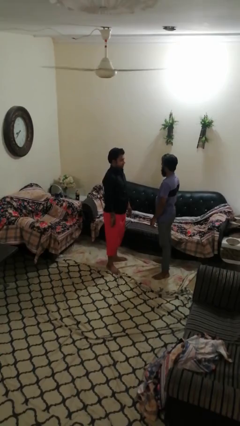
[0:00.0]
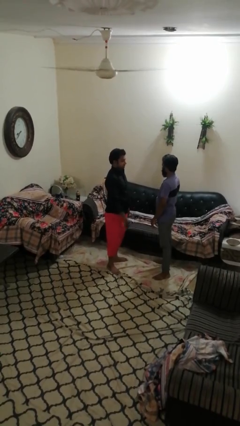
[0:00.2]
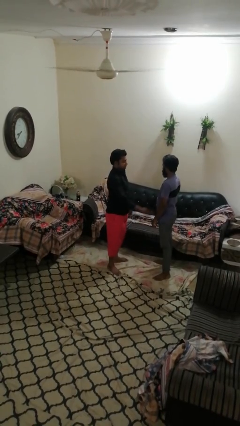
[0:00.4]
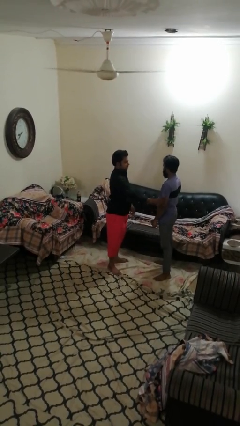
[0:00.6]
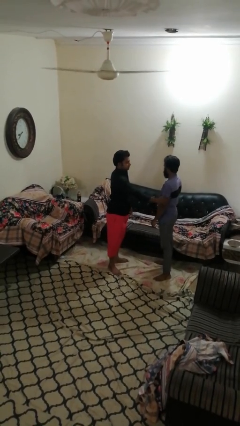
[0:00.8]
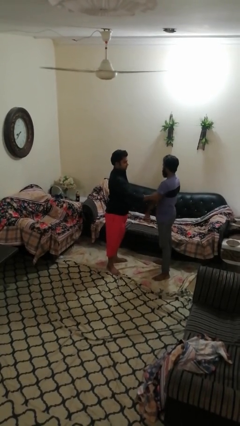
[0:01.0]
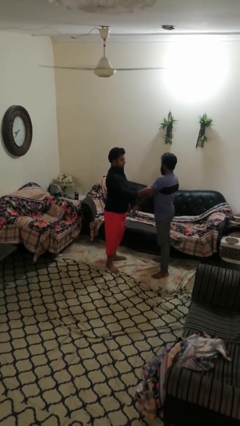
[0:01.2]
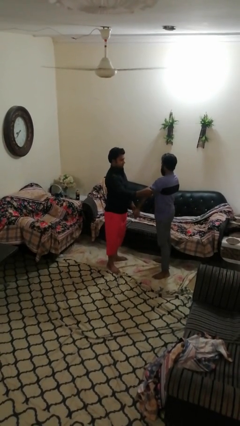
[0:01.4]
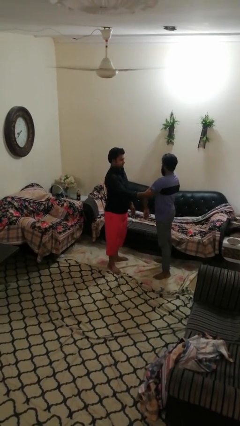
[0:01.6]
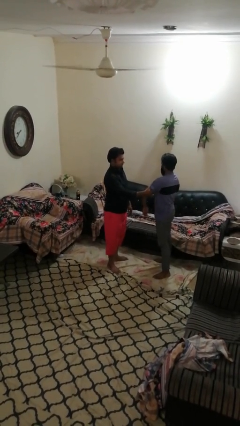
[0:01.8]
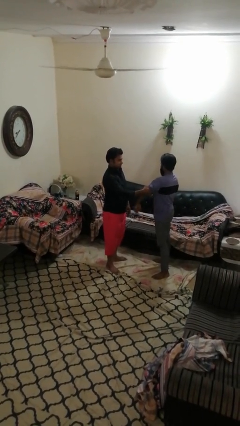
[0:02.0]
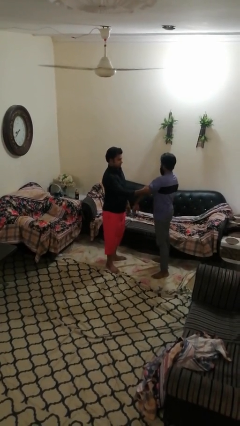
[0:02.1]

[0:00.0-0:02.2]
person grabs person by bicep

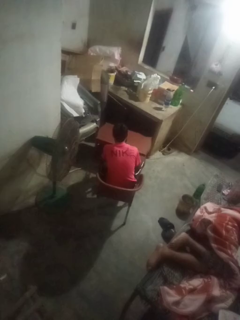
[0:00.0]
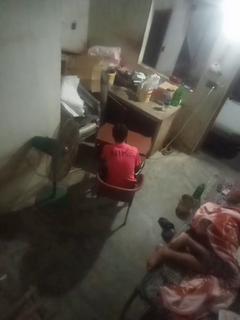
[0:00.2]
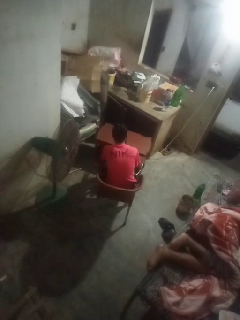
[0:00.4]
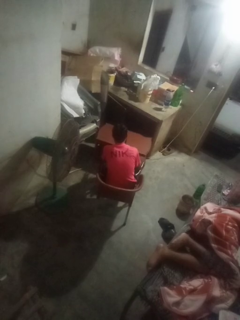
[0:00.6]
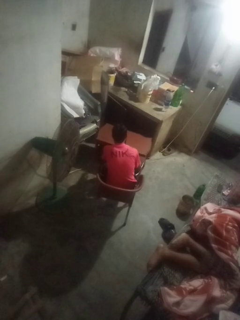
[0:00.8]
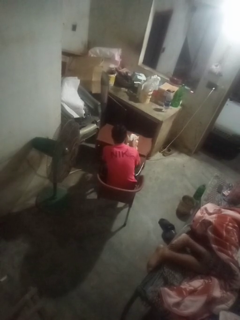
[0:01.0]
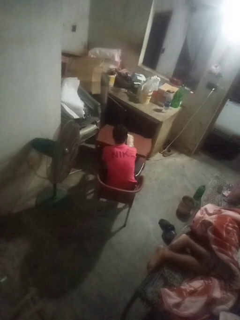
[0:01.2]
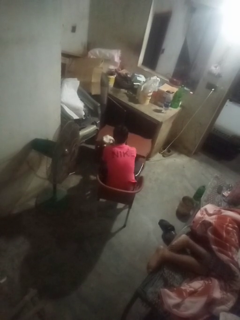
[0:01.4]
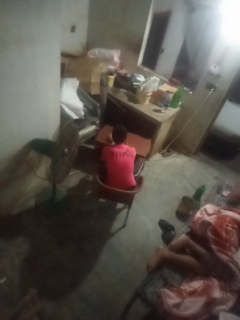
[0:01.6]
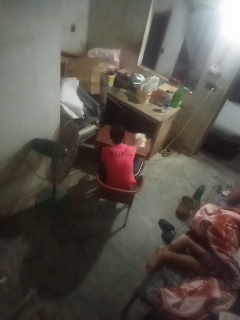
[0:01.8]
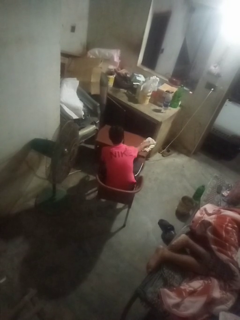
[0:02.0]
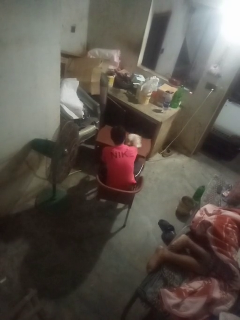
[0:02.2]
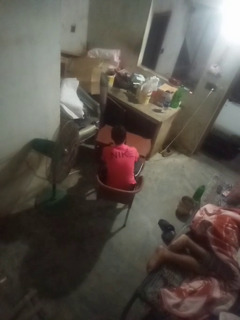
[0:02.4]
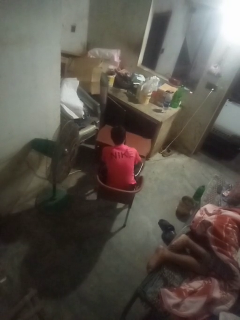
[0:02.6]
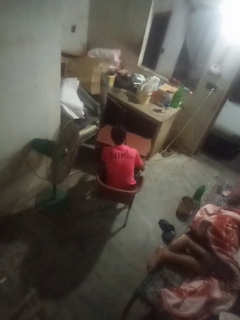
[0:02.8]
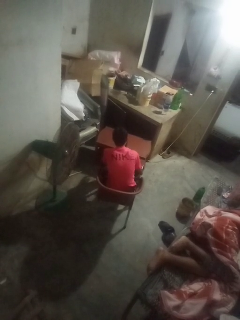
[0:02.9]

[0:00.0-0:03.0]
person cleans table with rag

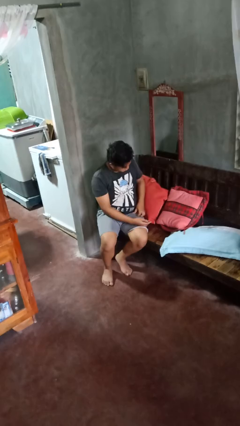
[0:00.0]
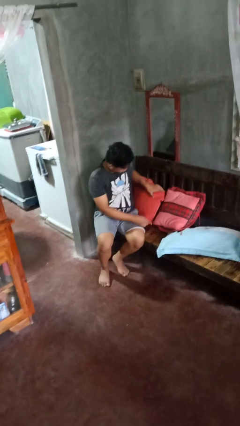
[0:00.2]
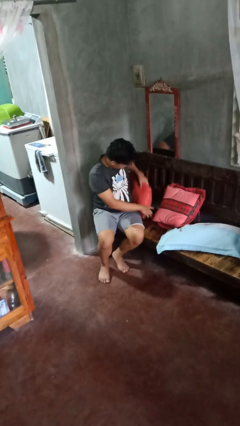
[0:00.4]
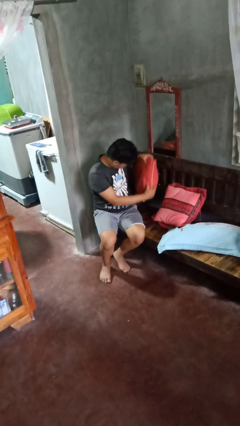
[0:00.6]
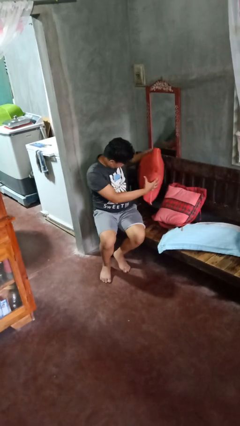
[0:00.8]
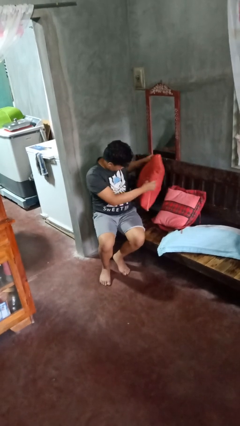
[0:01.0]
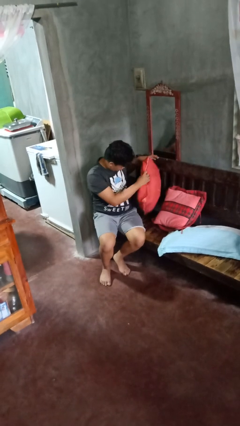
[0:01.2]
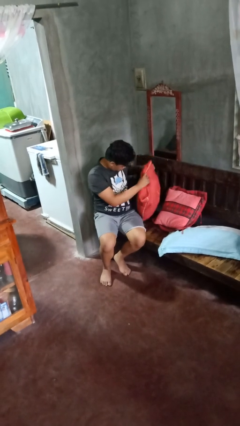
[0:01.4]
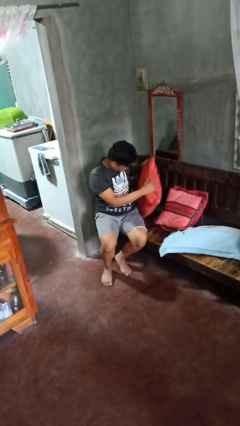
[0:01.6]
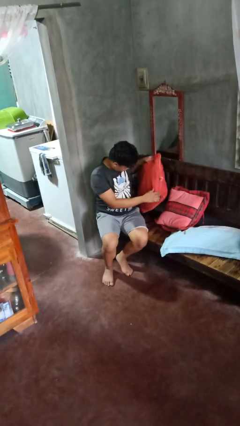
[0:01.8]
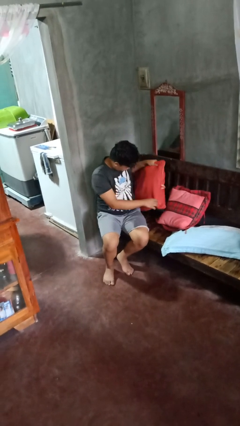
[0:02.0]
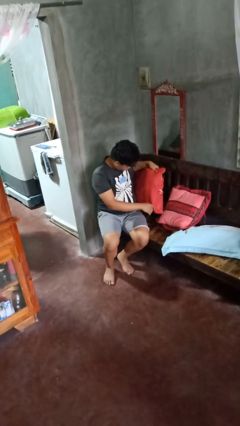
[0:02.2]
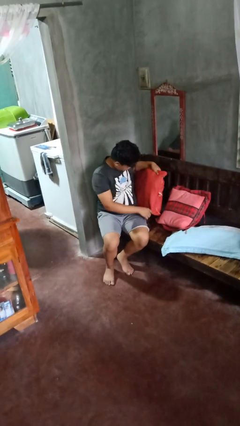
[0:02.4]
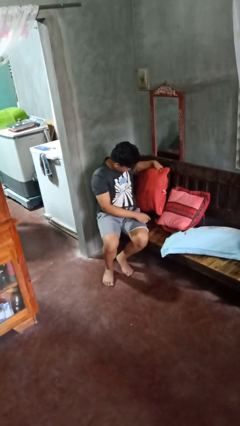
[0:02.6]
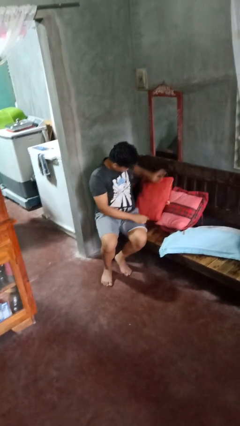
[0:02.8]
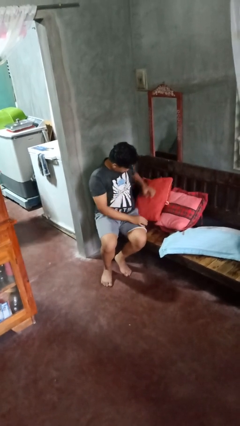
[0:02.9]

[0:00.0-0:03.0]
person searches in couch

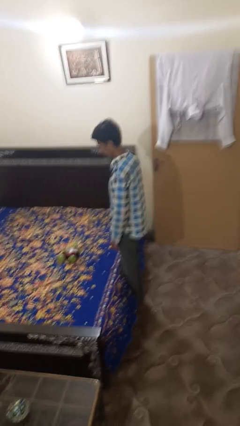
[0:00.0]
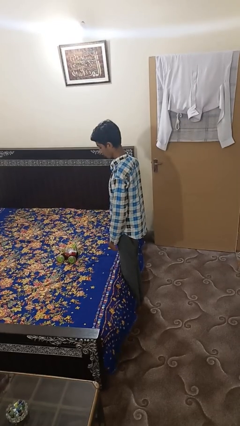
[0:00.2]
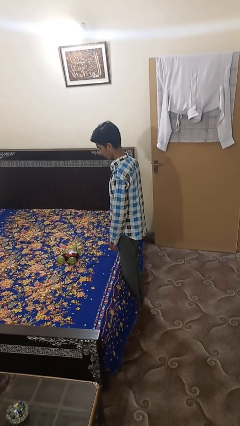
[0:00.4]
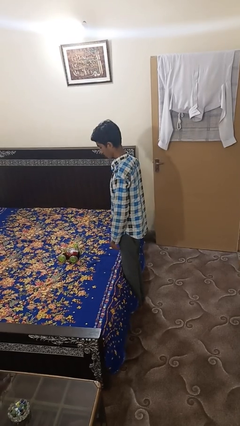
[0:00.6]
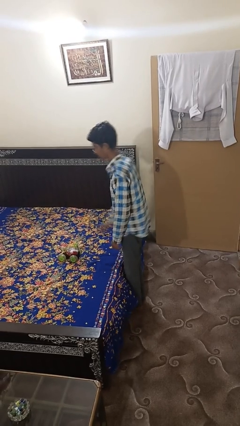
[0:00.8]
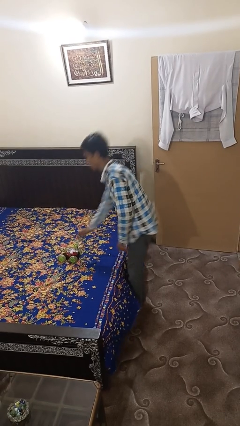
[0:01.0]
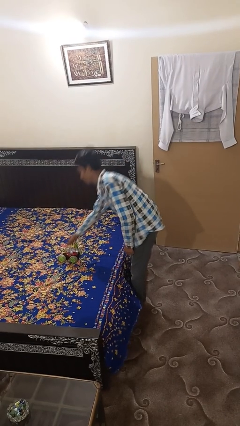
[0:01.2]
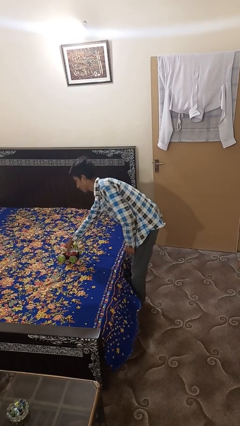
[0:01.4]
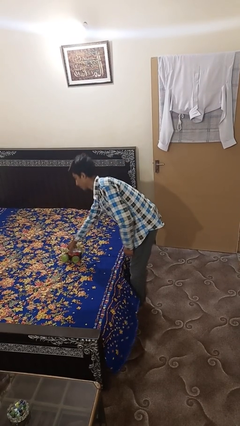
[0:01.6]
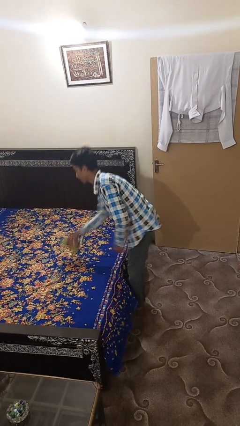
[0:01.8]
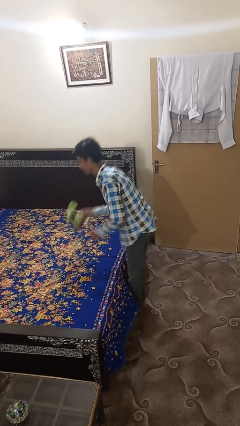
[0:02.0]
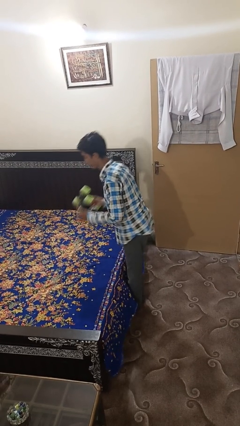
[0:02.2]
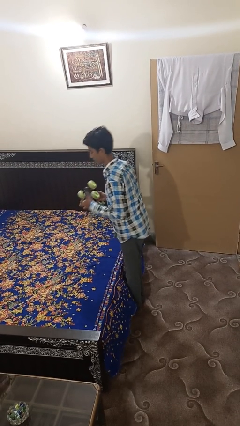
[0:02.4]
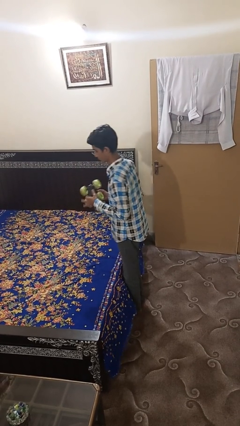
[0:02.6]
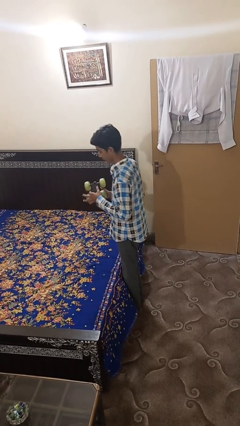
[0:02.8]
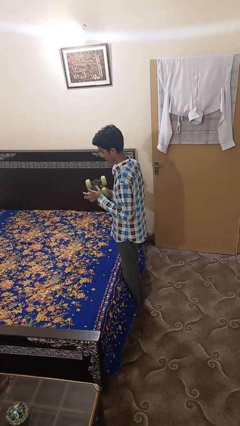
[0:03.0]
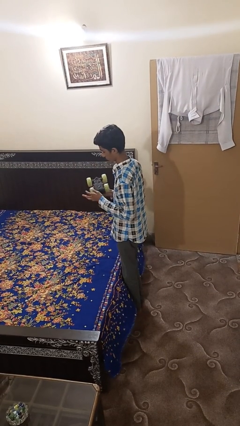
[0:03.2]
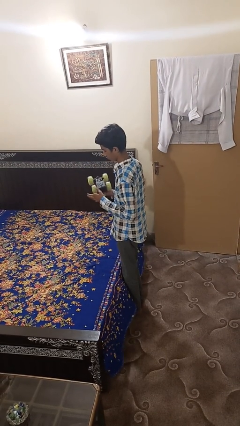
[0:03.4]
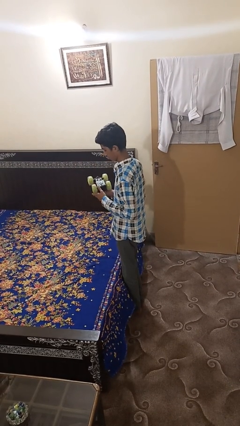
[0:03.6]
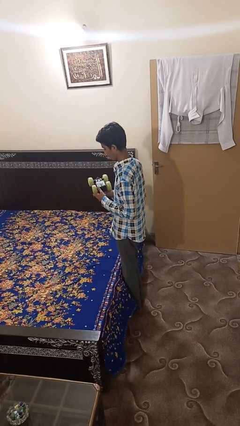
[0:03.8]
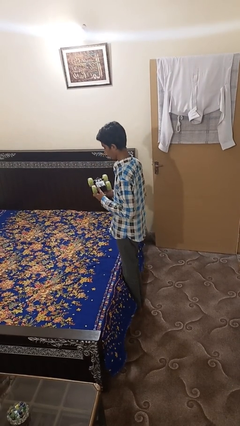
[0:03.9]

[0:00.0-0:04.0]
person picks up object from bed

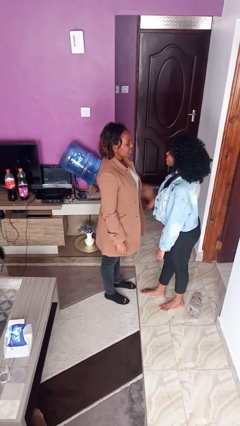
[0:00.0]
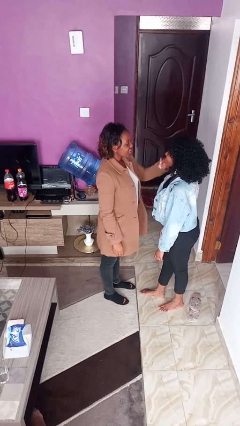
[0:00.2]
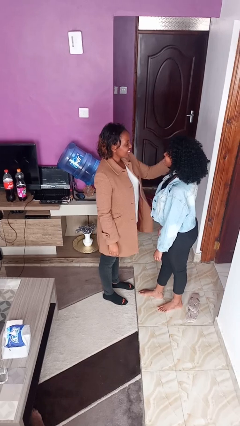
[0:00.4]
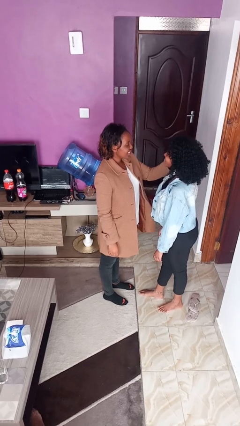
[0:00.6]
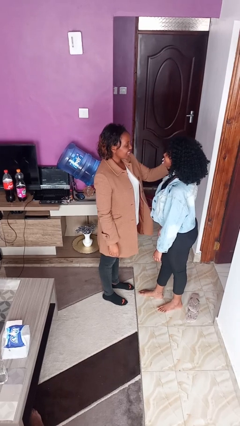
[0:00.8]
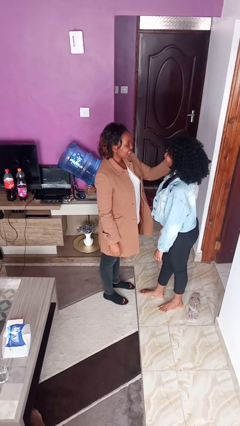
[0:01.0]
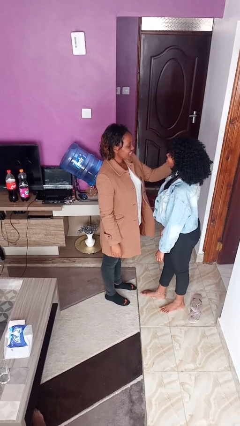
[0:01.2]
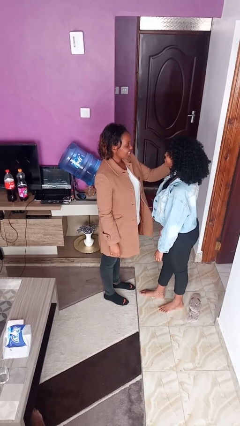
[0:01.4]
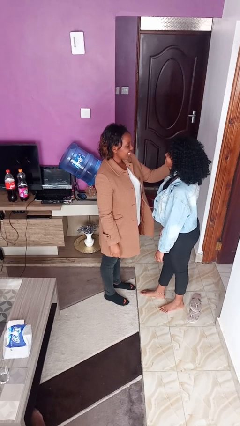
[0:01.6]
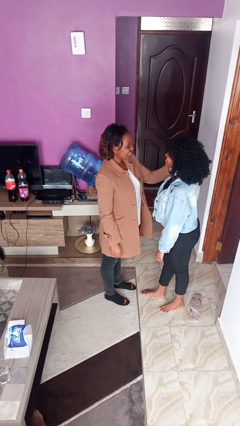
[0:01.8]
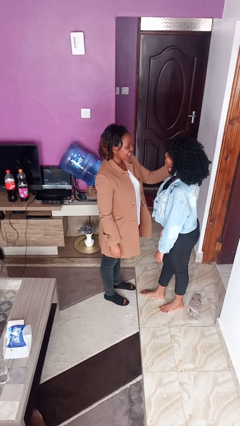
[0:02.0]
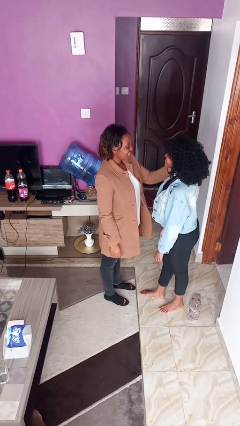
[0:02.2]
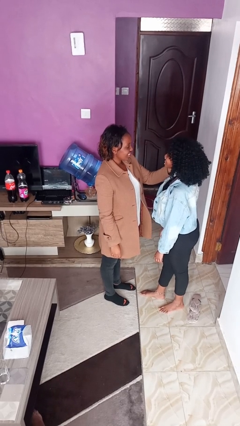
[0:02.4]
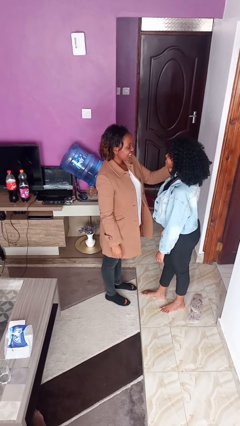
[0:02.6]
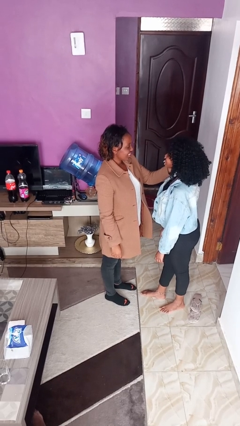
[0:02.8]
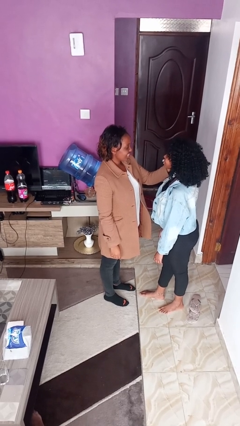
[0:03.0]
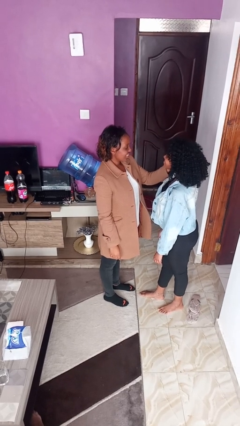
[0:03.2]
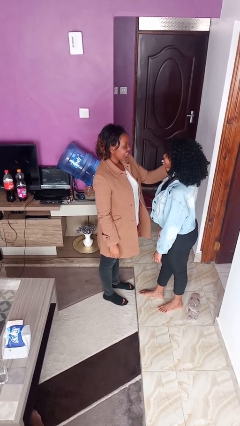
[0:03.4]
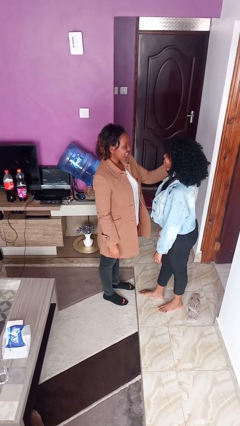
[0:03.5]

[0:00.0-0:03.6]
person touches face of person

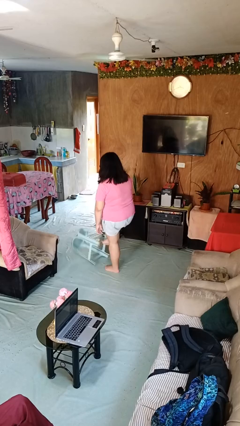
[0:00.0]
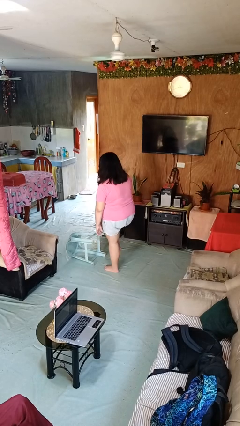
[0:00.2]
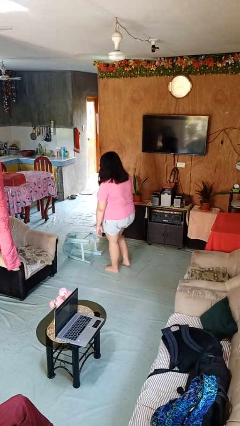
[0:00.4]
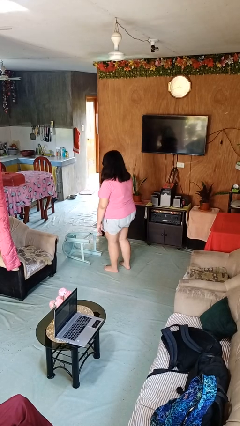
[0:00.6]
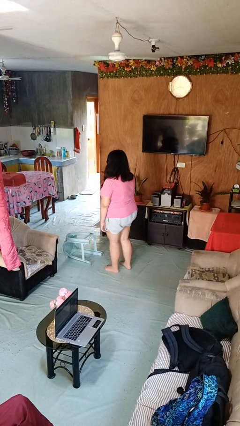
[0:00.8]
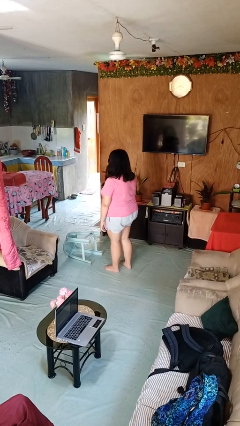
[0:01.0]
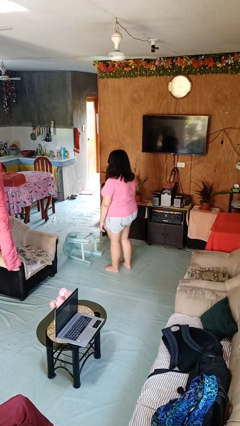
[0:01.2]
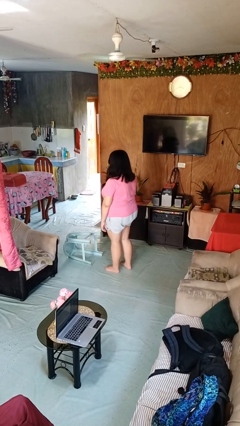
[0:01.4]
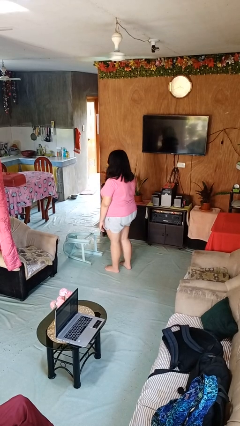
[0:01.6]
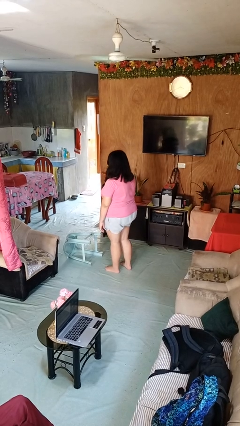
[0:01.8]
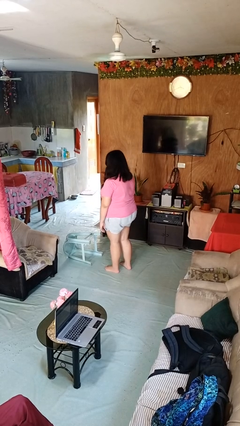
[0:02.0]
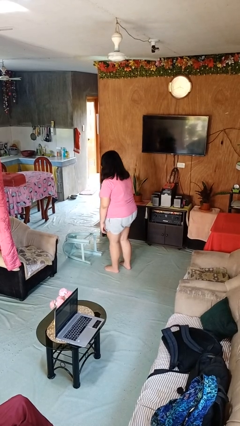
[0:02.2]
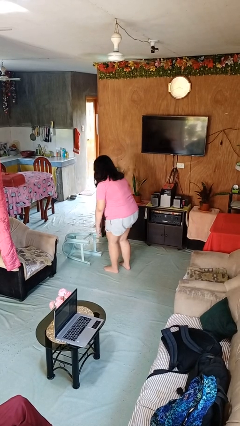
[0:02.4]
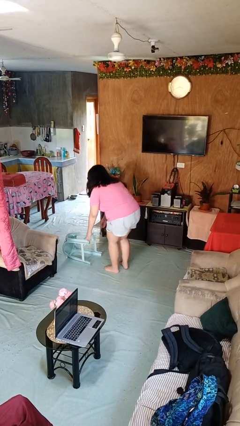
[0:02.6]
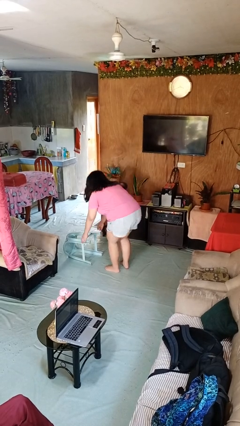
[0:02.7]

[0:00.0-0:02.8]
person knocks over furniture
